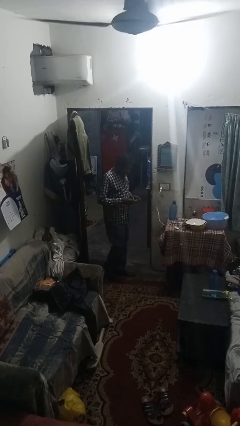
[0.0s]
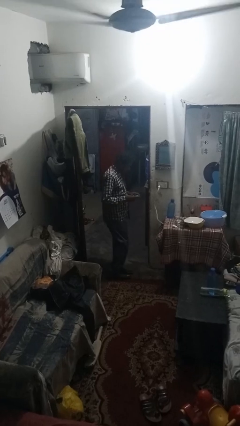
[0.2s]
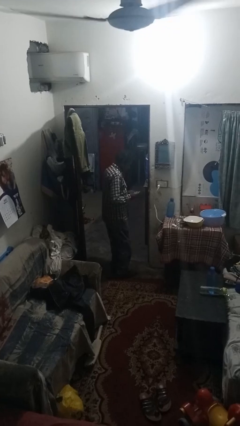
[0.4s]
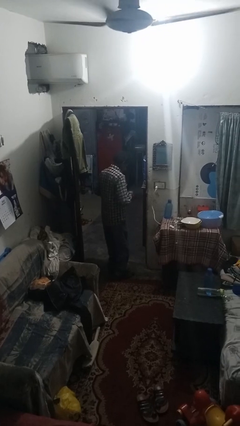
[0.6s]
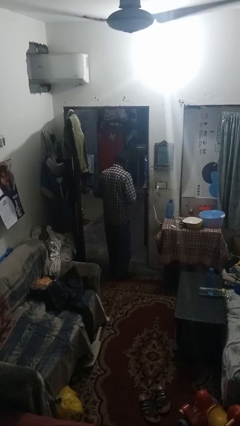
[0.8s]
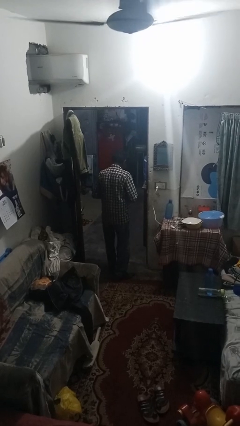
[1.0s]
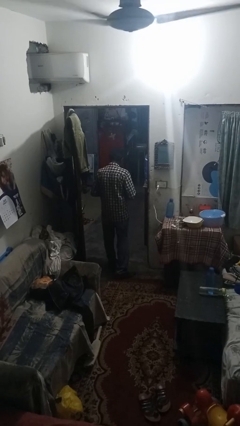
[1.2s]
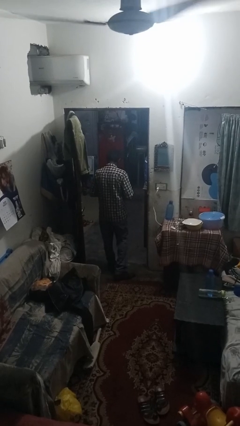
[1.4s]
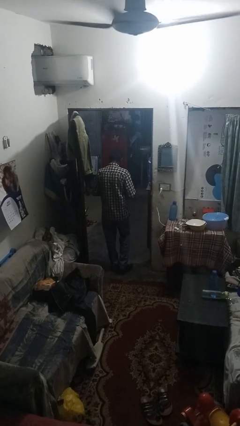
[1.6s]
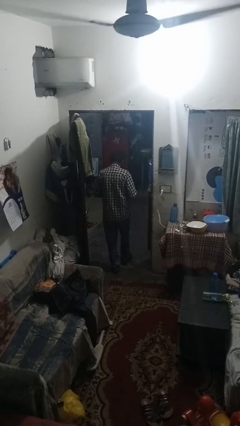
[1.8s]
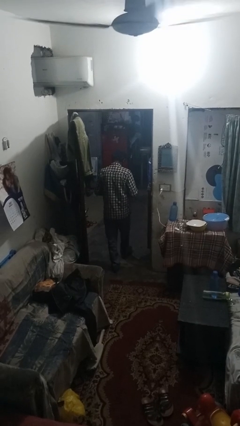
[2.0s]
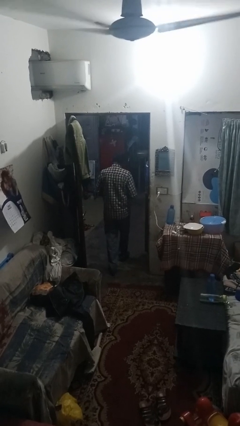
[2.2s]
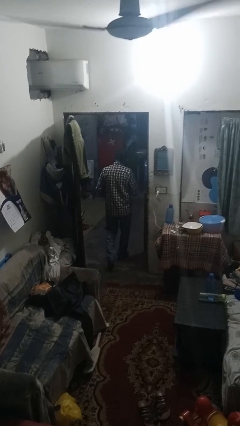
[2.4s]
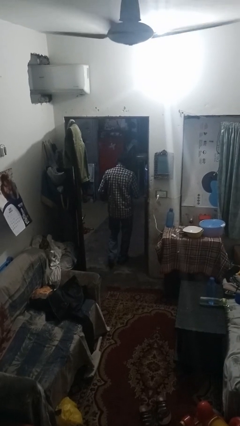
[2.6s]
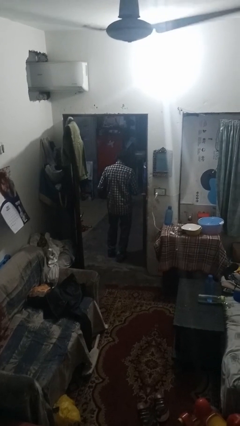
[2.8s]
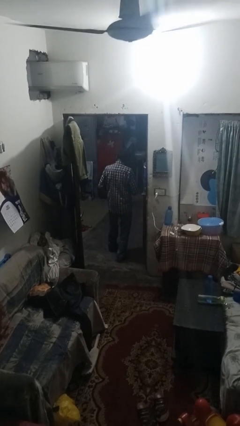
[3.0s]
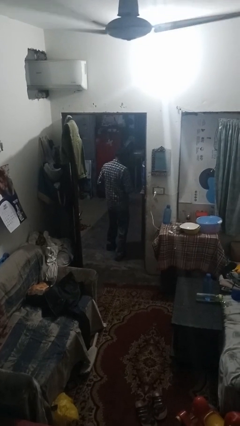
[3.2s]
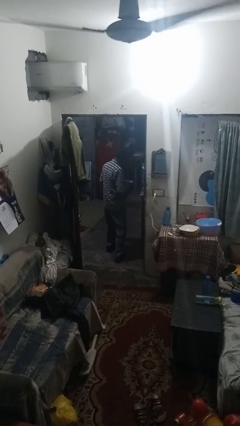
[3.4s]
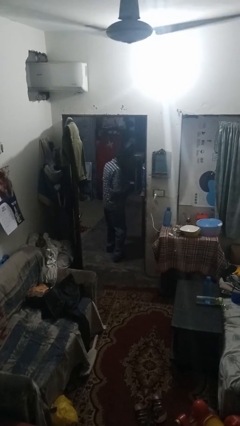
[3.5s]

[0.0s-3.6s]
person exits scene through structure

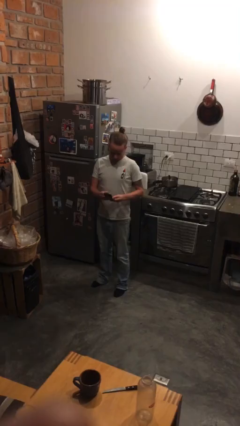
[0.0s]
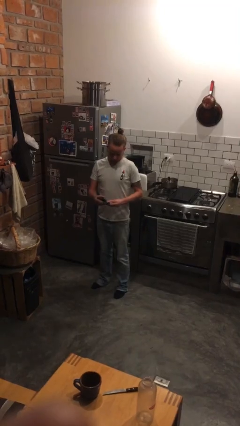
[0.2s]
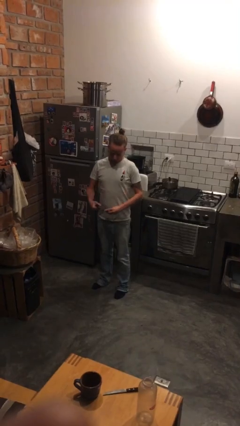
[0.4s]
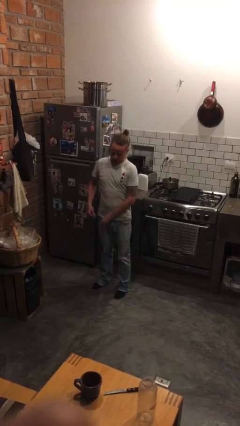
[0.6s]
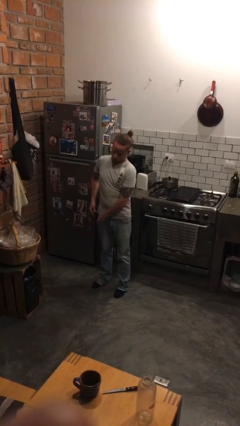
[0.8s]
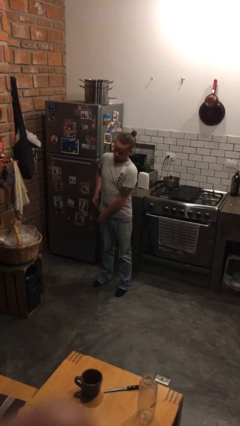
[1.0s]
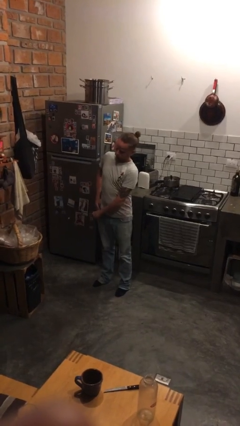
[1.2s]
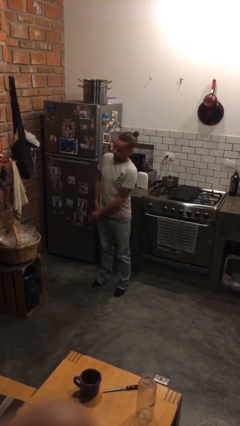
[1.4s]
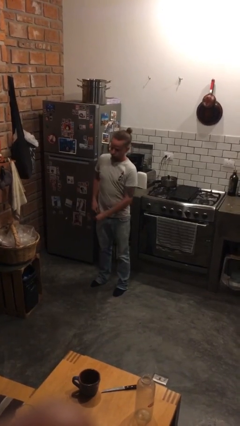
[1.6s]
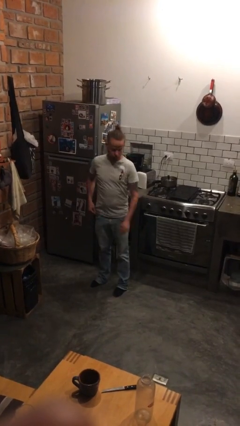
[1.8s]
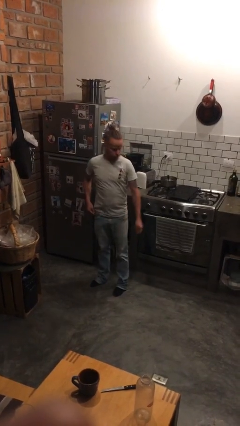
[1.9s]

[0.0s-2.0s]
person puts phone into pocket

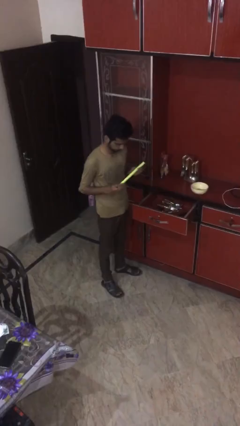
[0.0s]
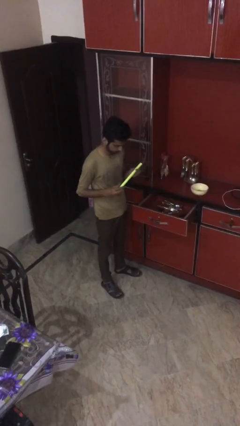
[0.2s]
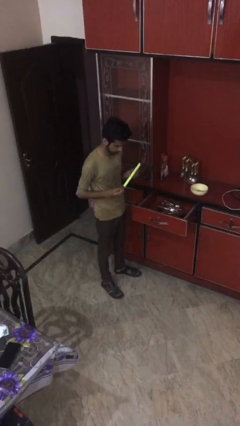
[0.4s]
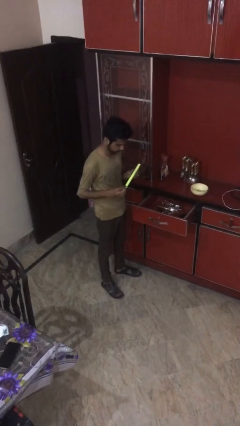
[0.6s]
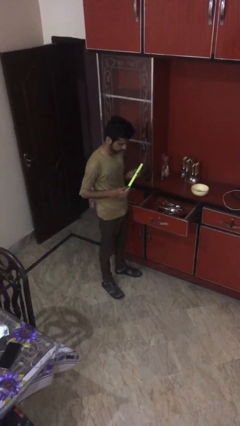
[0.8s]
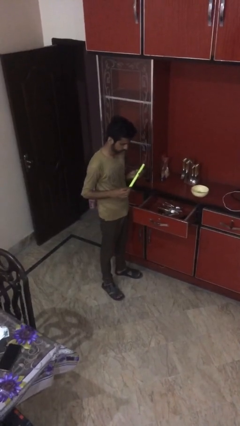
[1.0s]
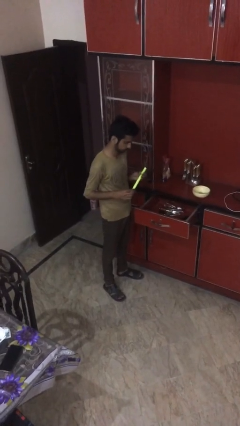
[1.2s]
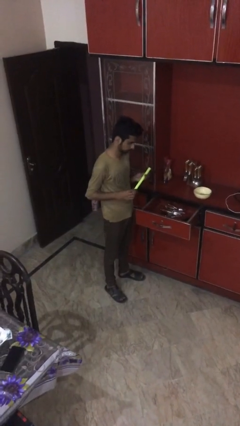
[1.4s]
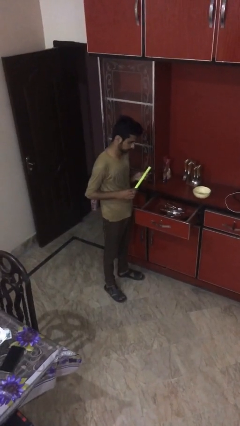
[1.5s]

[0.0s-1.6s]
person takes object from kitchen drawer

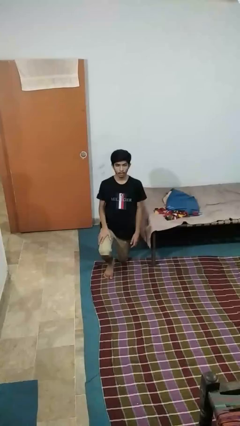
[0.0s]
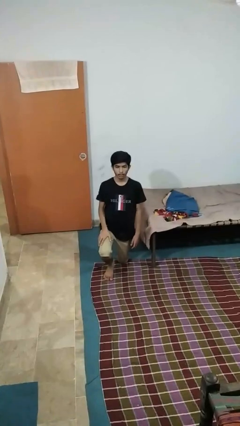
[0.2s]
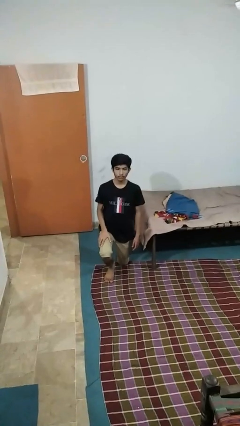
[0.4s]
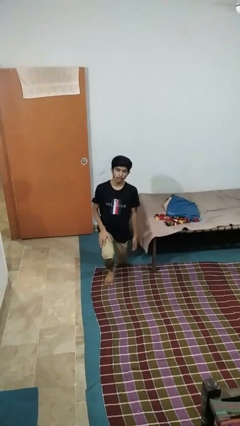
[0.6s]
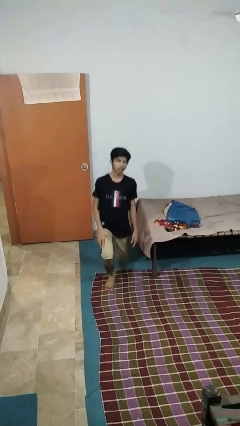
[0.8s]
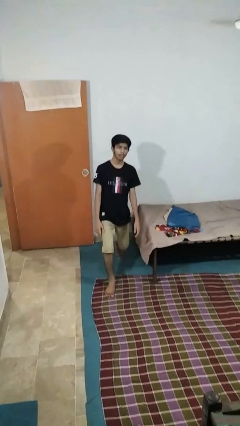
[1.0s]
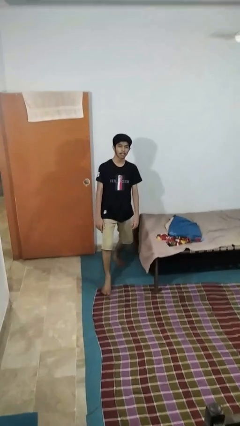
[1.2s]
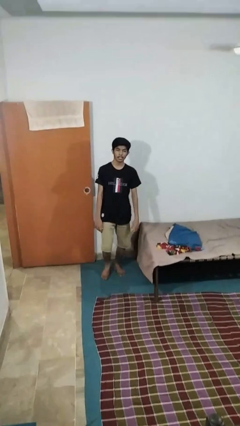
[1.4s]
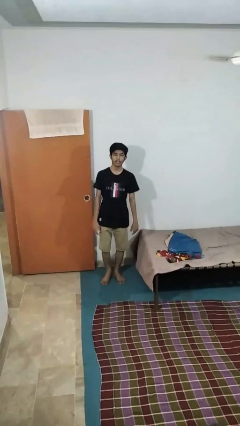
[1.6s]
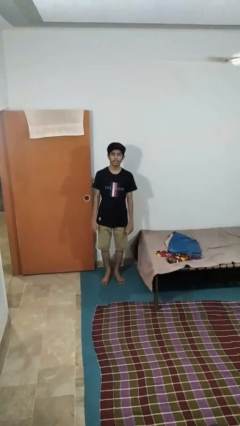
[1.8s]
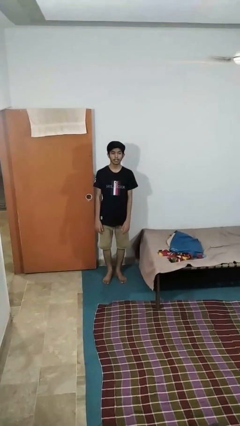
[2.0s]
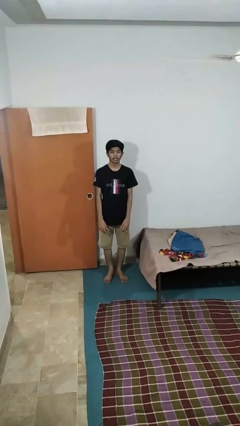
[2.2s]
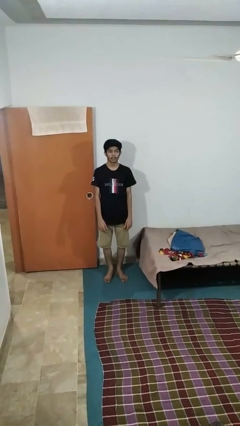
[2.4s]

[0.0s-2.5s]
person stands up from floor

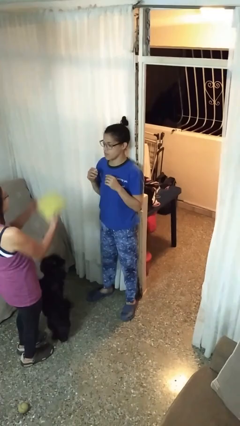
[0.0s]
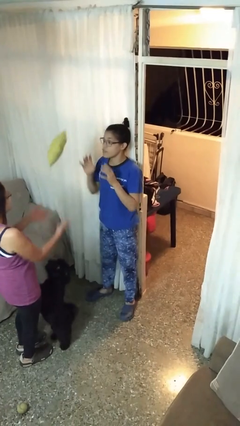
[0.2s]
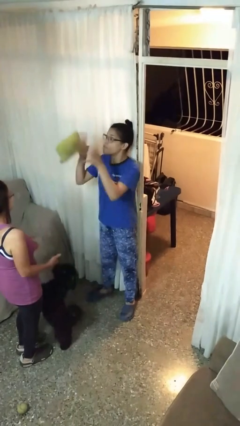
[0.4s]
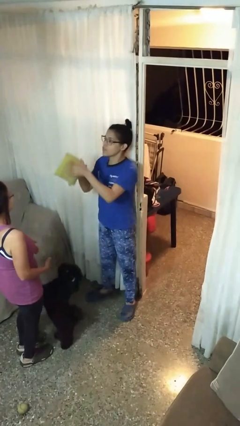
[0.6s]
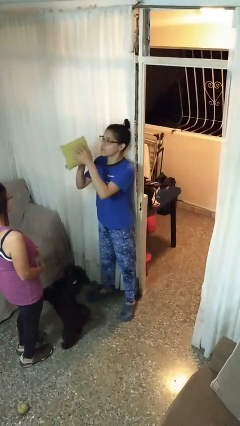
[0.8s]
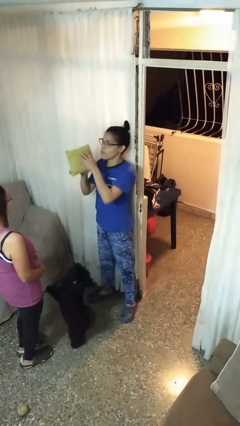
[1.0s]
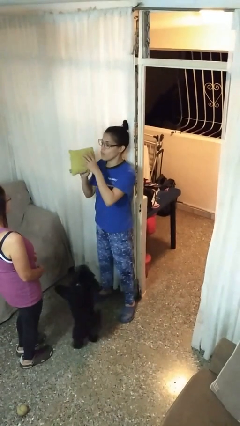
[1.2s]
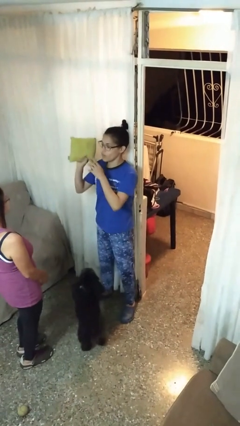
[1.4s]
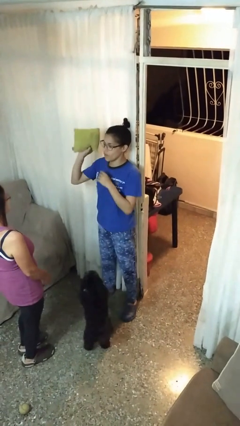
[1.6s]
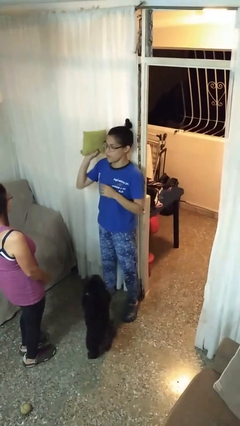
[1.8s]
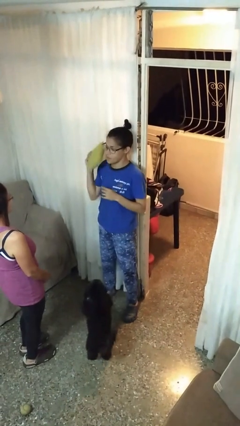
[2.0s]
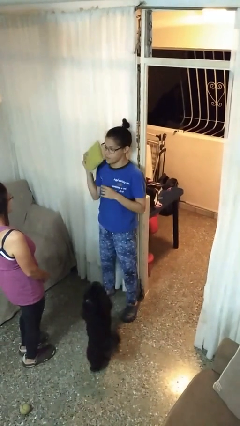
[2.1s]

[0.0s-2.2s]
person catches object from person

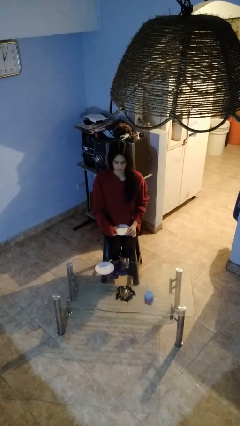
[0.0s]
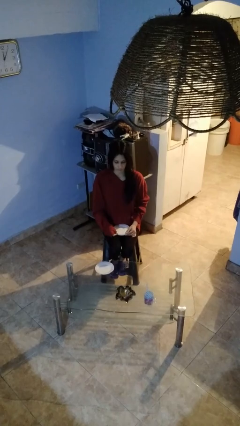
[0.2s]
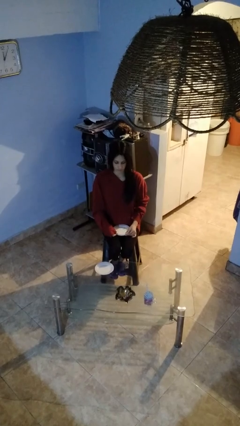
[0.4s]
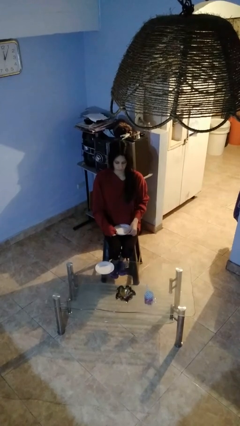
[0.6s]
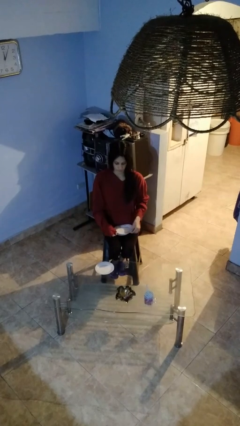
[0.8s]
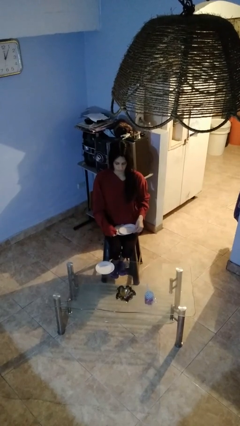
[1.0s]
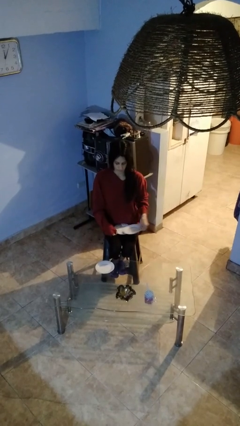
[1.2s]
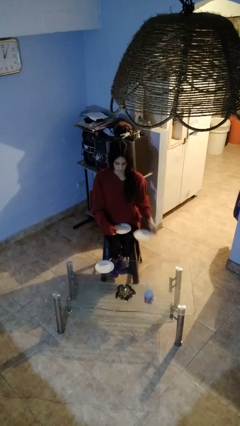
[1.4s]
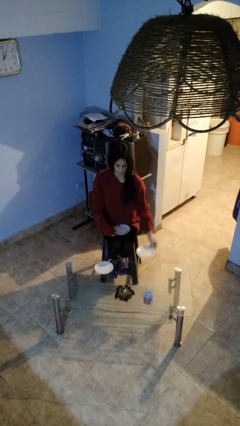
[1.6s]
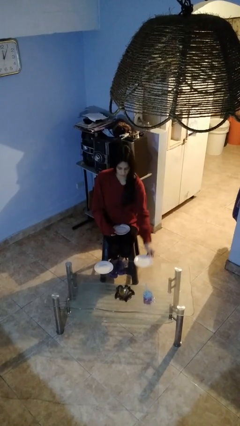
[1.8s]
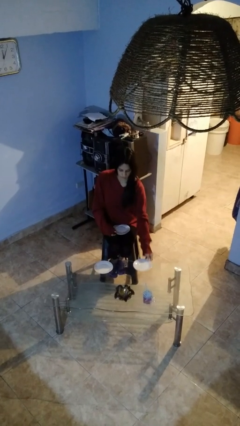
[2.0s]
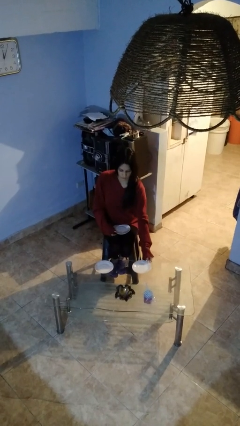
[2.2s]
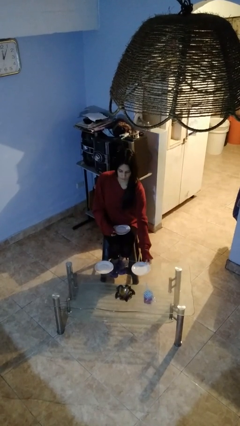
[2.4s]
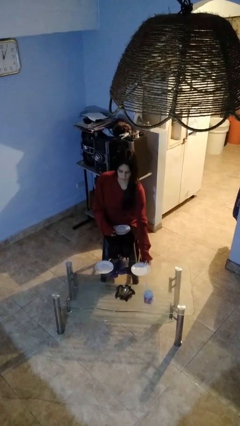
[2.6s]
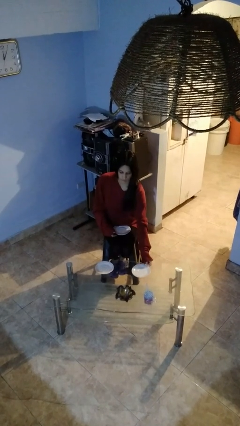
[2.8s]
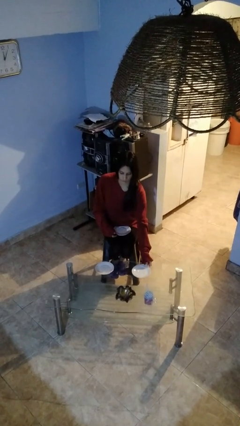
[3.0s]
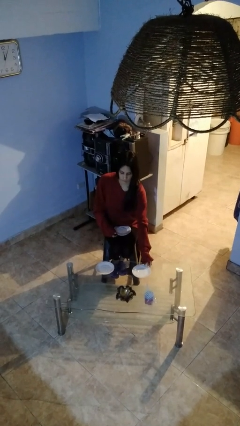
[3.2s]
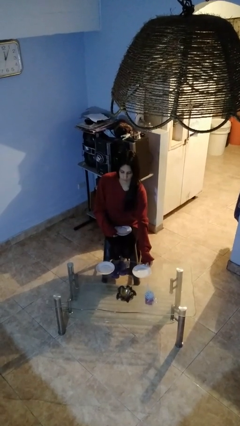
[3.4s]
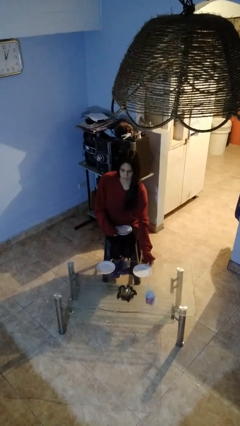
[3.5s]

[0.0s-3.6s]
person sets table

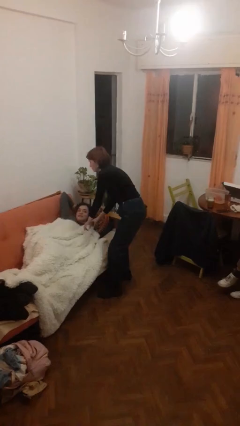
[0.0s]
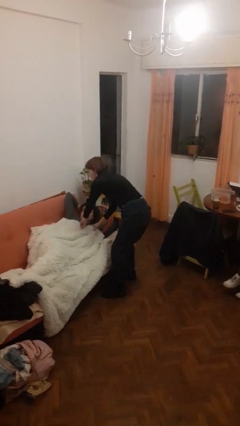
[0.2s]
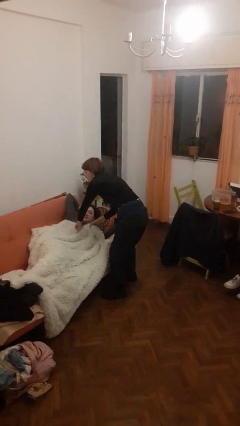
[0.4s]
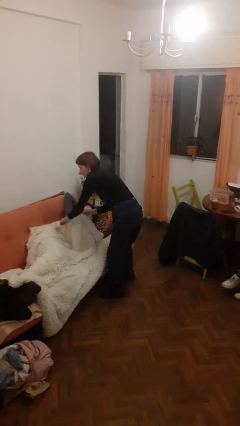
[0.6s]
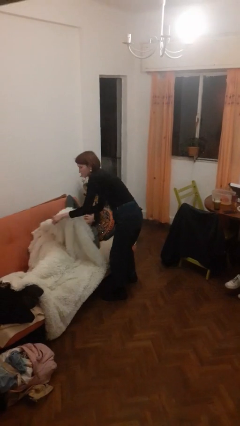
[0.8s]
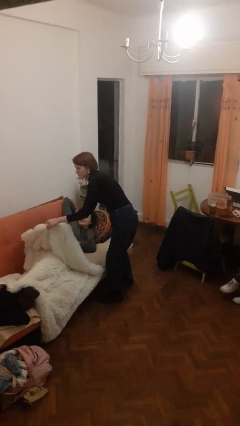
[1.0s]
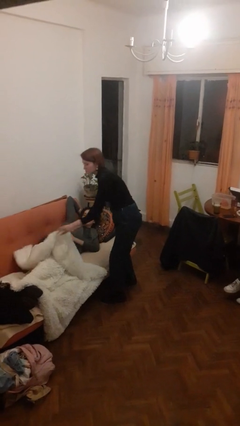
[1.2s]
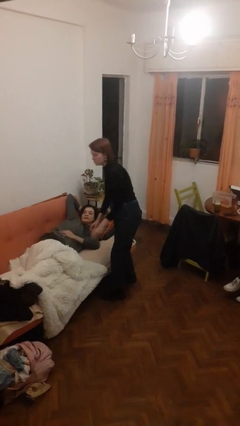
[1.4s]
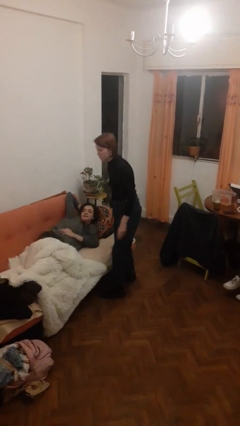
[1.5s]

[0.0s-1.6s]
person uncovers friend with blanket
